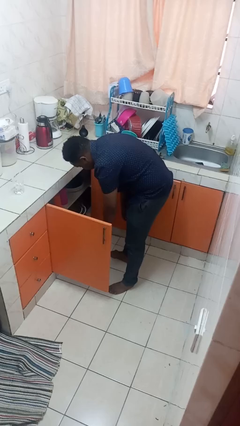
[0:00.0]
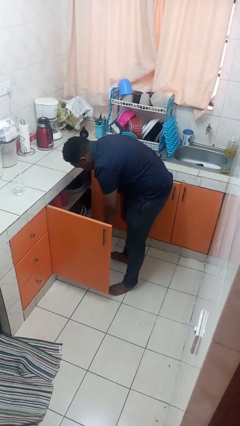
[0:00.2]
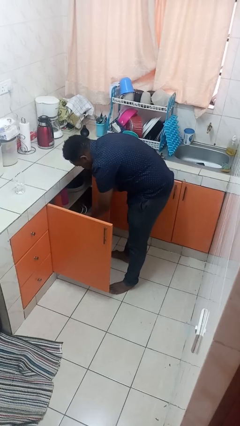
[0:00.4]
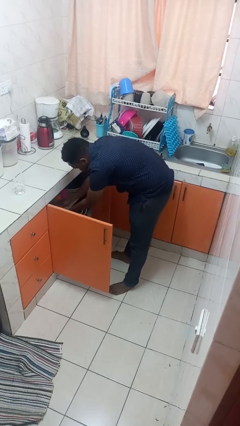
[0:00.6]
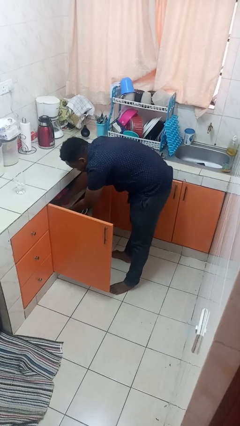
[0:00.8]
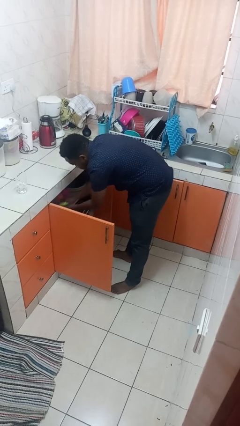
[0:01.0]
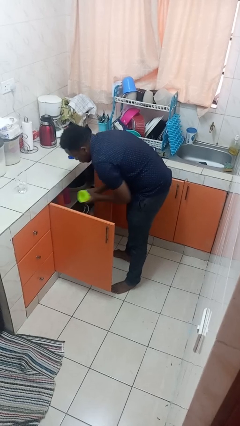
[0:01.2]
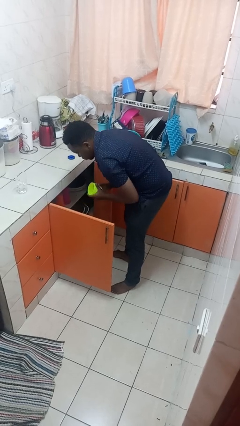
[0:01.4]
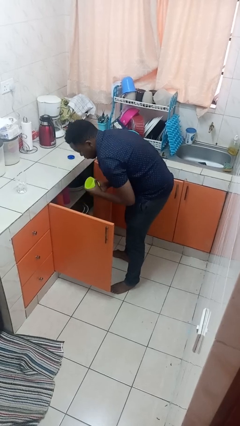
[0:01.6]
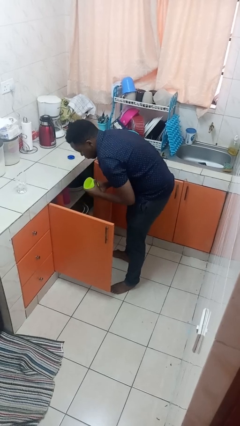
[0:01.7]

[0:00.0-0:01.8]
person takes object from cabinet

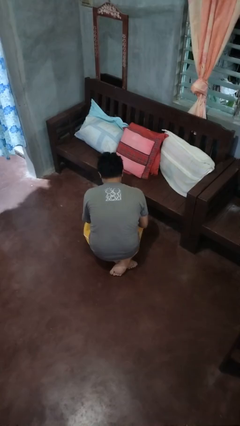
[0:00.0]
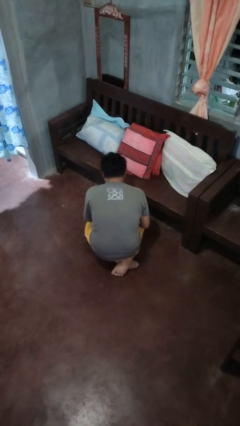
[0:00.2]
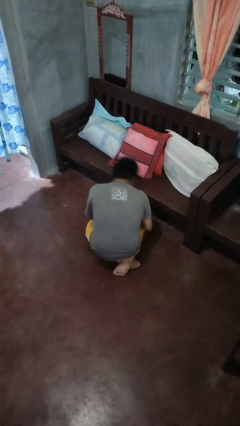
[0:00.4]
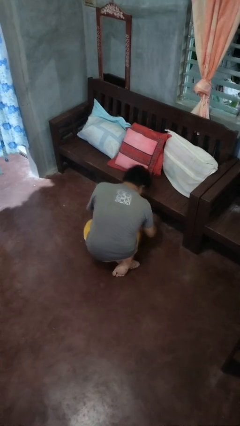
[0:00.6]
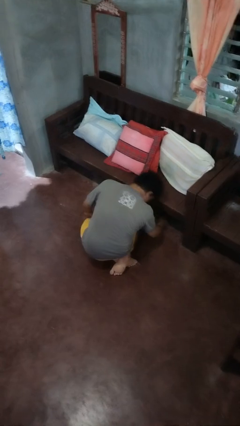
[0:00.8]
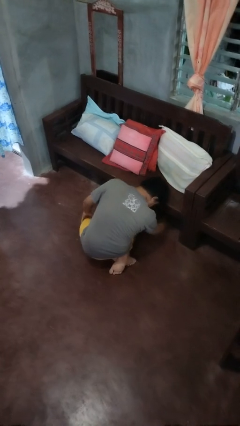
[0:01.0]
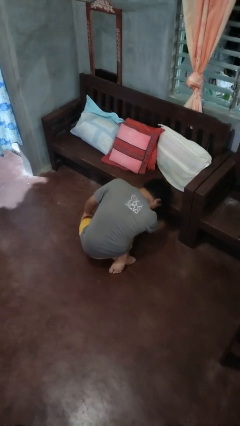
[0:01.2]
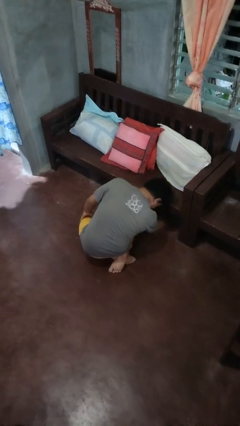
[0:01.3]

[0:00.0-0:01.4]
person searches under couch

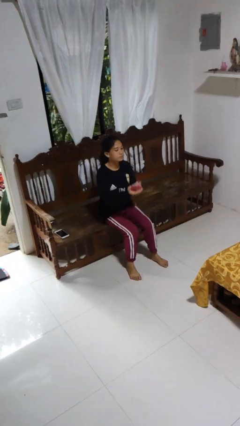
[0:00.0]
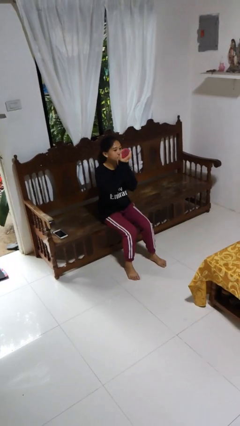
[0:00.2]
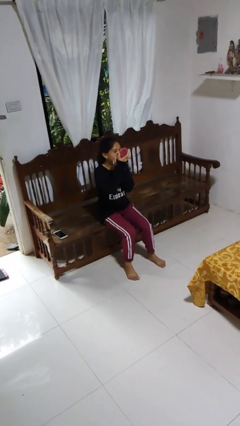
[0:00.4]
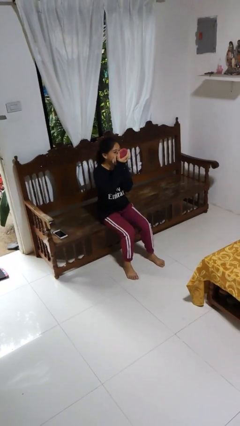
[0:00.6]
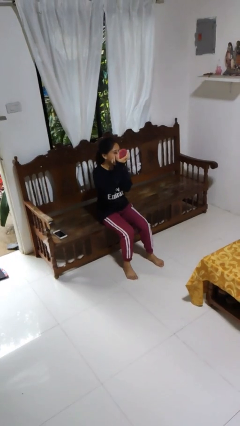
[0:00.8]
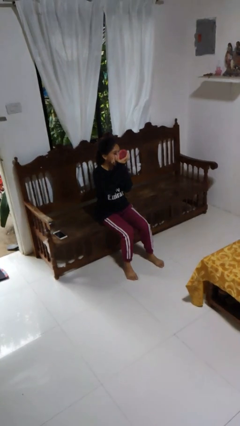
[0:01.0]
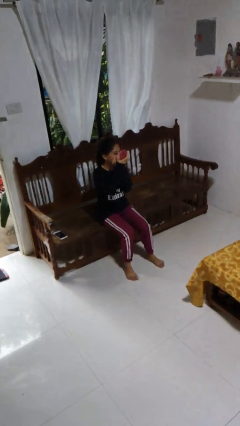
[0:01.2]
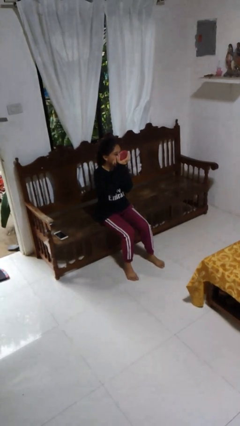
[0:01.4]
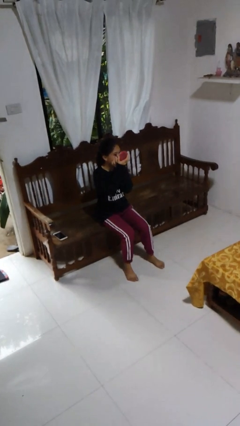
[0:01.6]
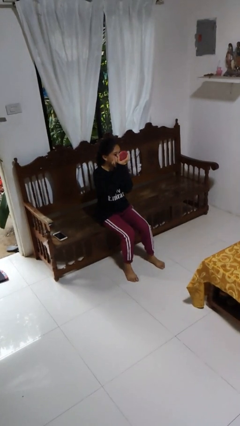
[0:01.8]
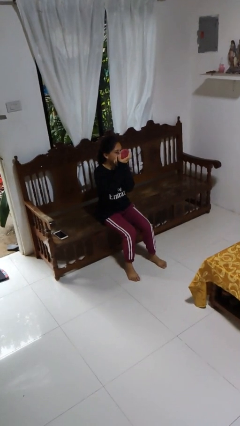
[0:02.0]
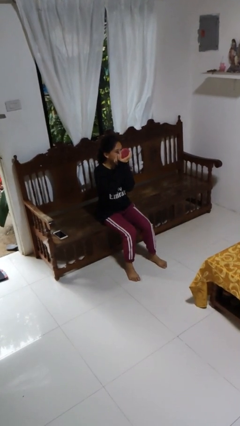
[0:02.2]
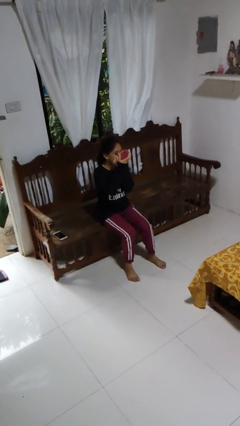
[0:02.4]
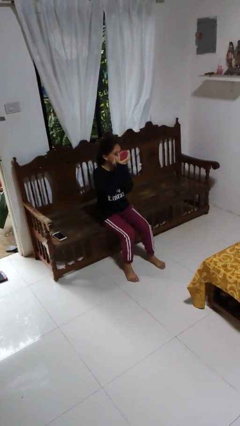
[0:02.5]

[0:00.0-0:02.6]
person applies eye makeup

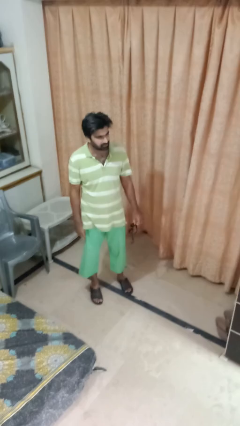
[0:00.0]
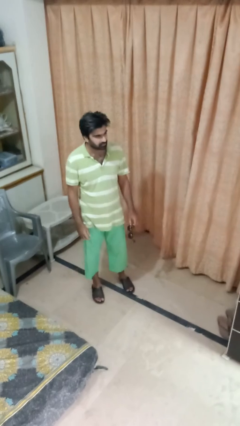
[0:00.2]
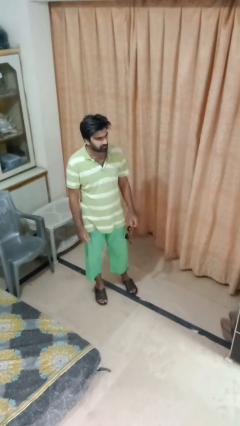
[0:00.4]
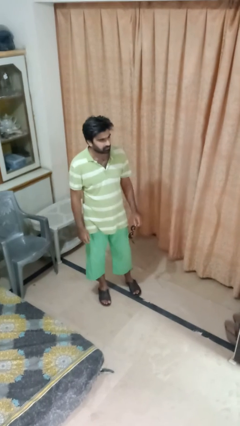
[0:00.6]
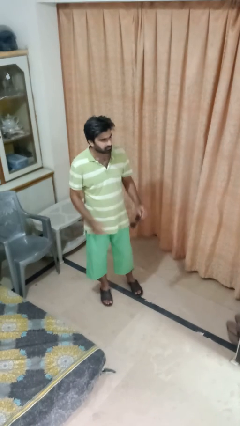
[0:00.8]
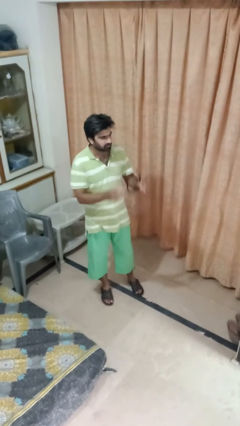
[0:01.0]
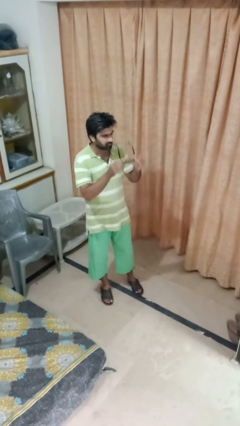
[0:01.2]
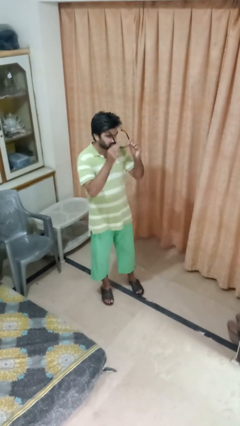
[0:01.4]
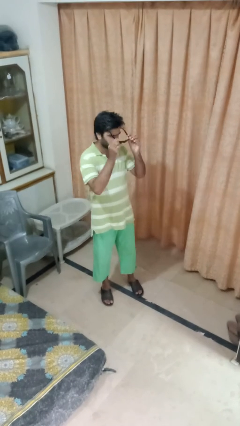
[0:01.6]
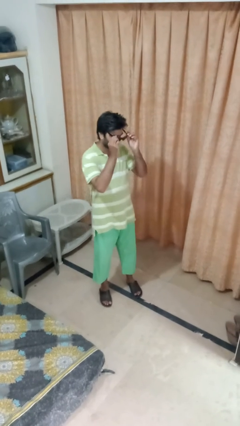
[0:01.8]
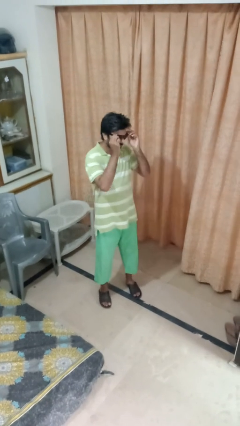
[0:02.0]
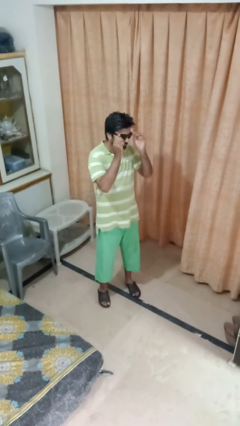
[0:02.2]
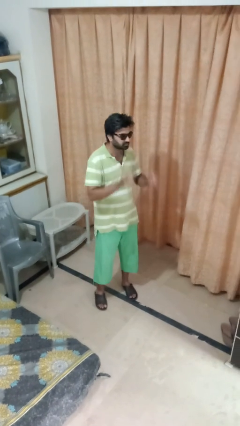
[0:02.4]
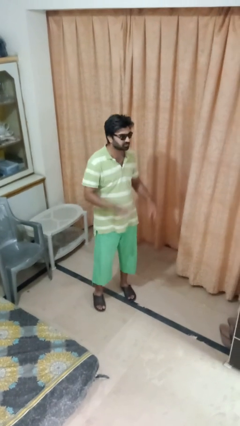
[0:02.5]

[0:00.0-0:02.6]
person puts on sunglasses

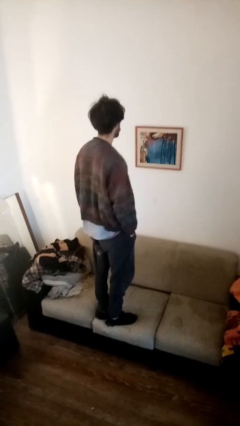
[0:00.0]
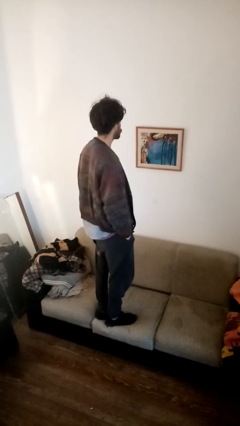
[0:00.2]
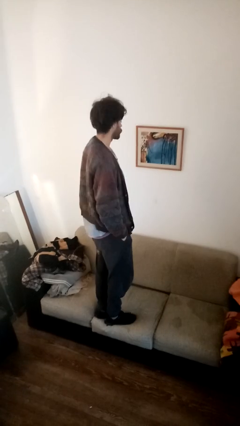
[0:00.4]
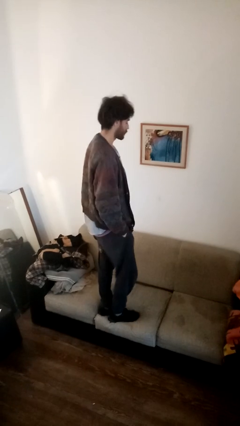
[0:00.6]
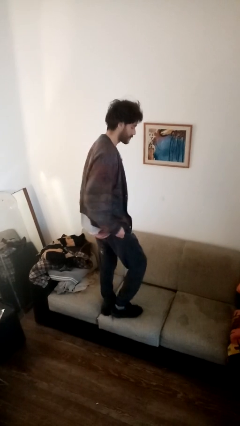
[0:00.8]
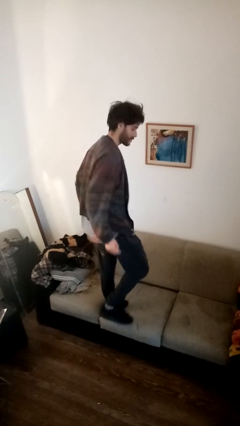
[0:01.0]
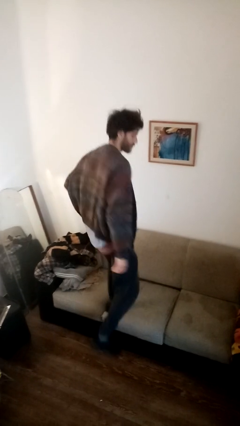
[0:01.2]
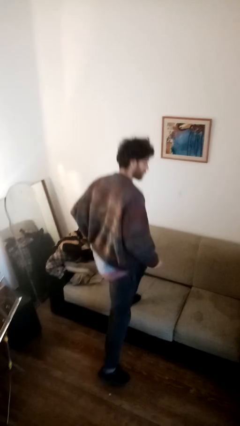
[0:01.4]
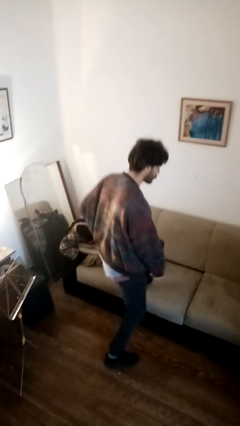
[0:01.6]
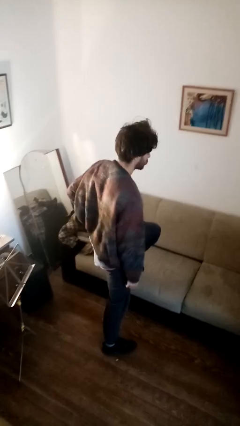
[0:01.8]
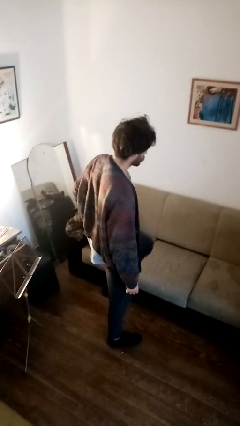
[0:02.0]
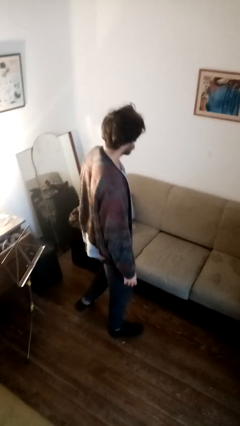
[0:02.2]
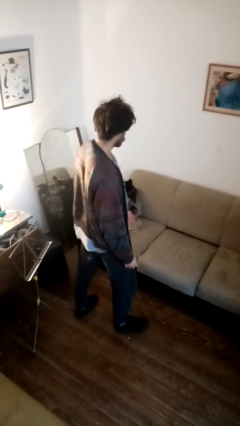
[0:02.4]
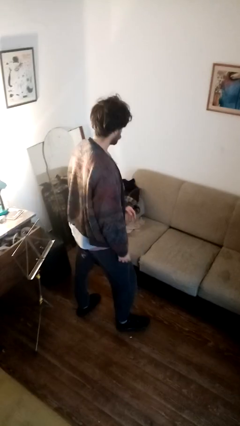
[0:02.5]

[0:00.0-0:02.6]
person climbs off couch

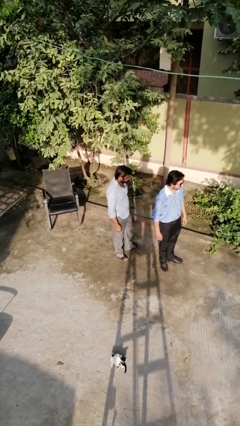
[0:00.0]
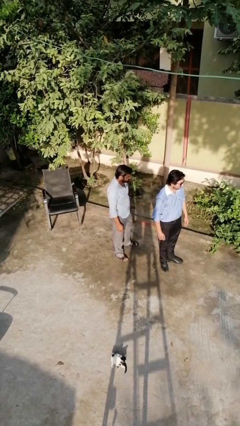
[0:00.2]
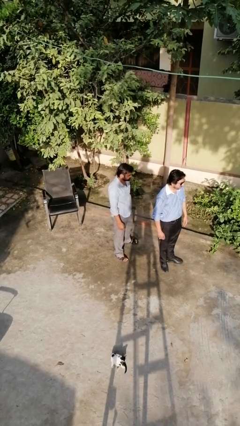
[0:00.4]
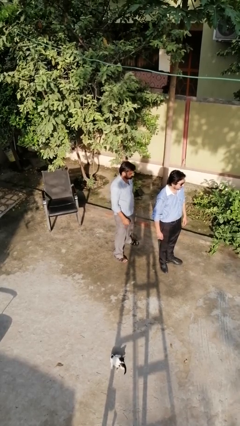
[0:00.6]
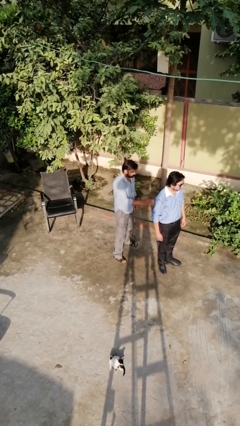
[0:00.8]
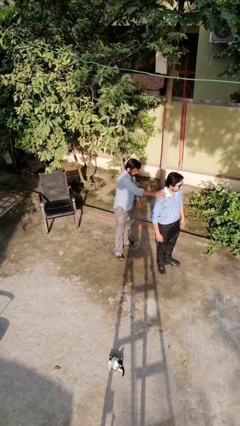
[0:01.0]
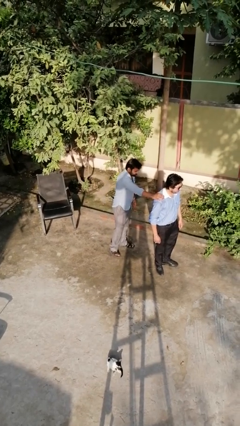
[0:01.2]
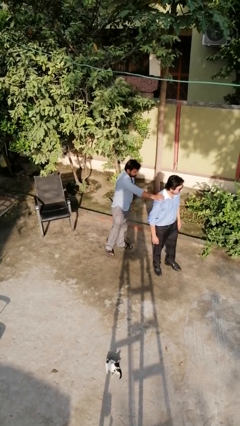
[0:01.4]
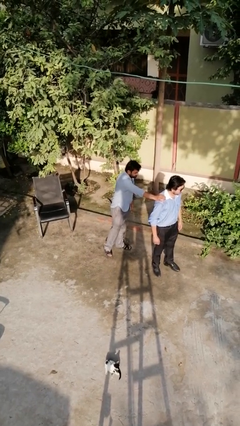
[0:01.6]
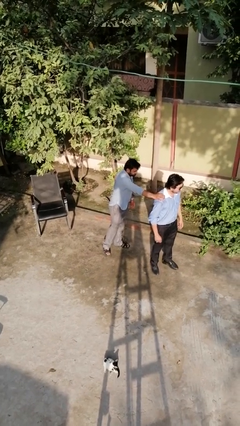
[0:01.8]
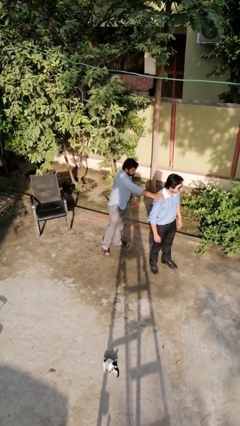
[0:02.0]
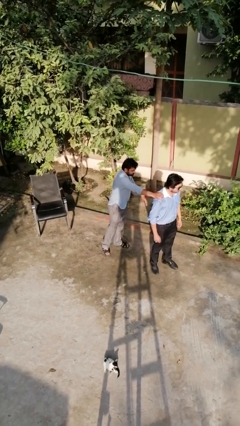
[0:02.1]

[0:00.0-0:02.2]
person grabs person by shoulder

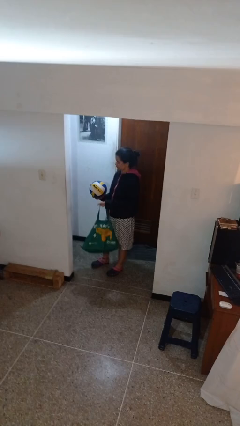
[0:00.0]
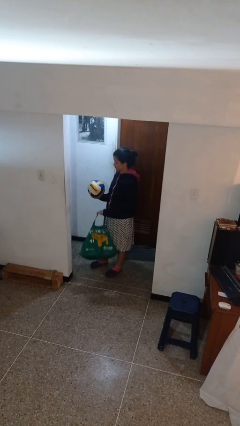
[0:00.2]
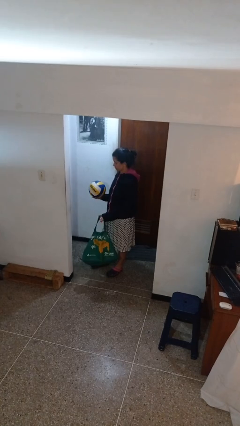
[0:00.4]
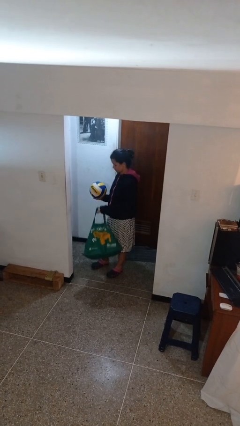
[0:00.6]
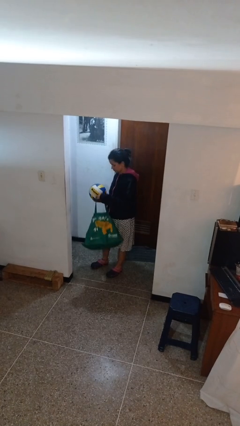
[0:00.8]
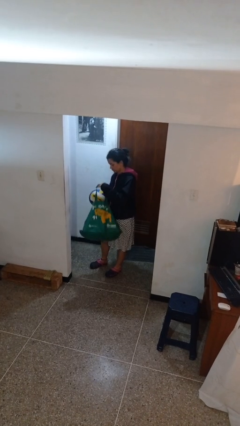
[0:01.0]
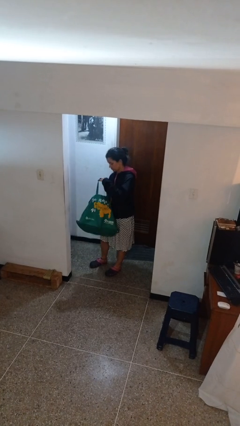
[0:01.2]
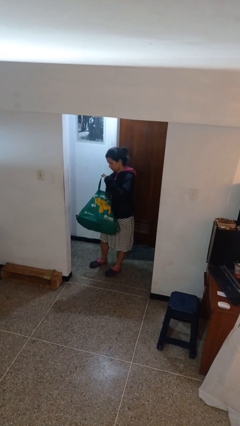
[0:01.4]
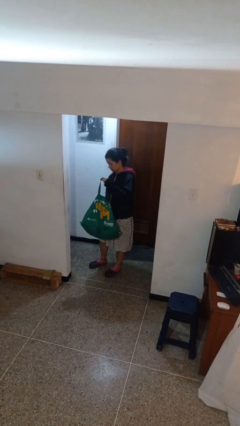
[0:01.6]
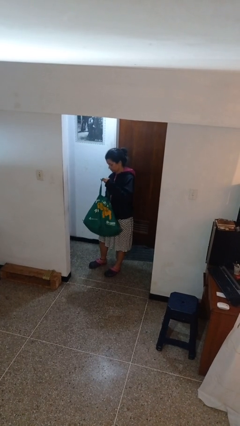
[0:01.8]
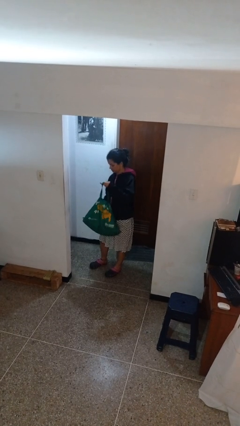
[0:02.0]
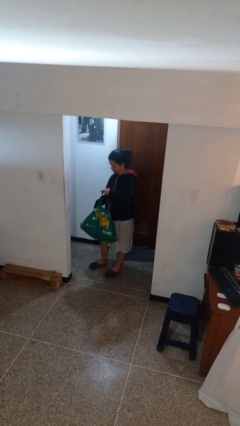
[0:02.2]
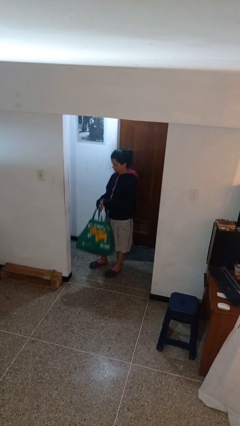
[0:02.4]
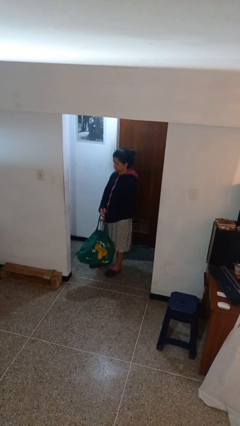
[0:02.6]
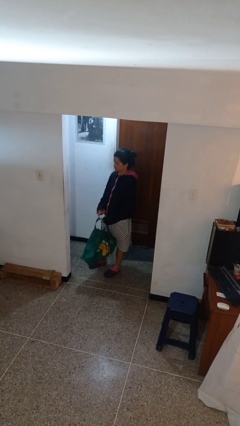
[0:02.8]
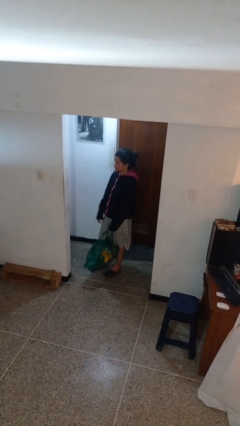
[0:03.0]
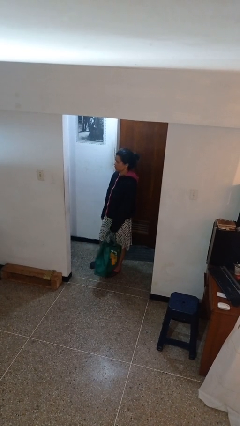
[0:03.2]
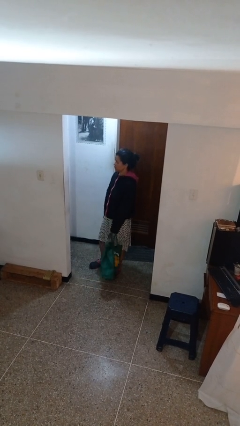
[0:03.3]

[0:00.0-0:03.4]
person puts object into bag

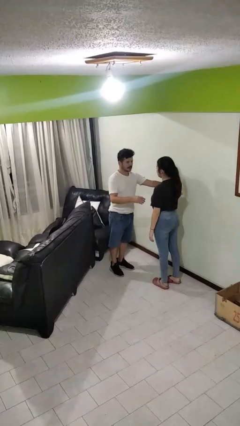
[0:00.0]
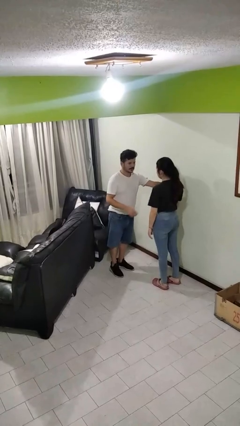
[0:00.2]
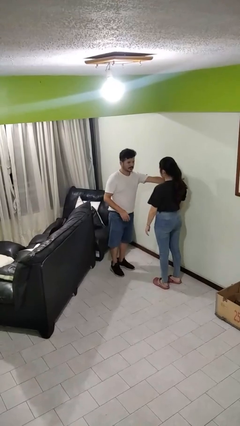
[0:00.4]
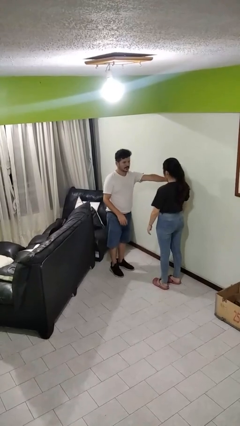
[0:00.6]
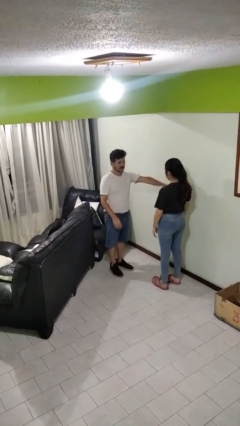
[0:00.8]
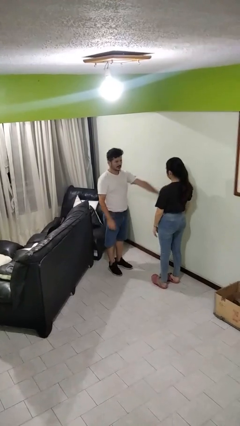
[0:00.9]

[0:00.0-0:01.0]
person shoves person
